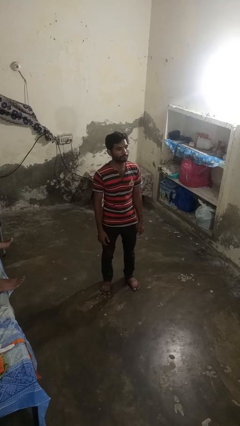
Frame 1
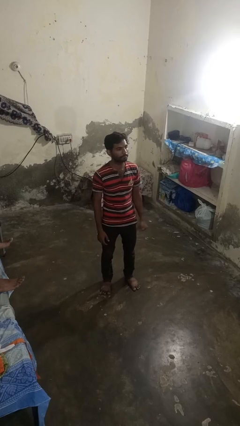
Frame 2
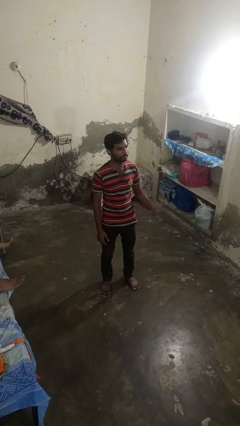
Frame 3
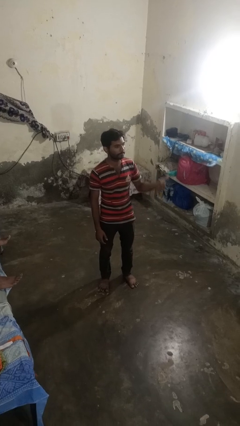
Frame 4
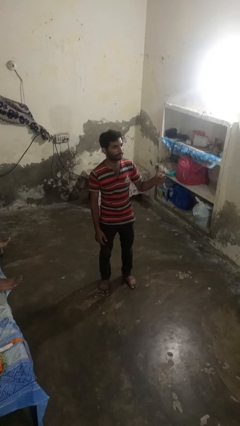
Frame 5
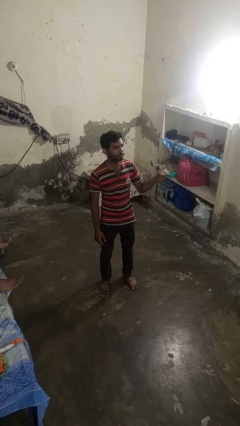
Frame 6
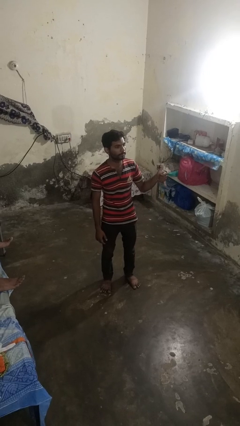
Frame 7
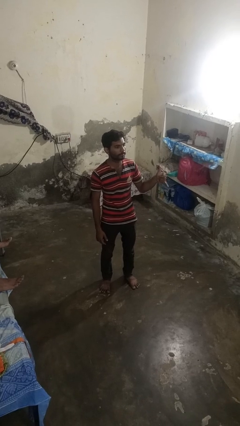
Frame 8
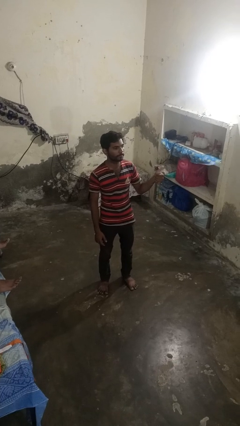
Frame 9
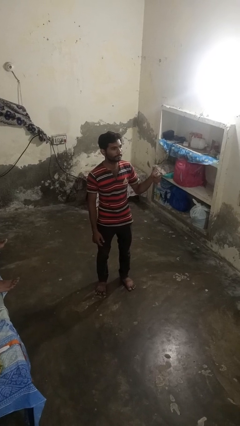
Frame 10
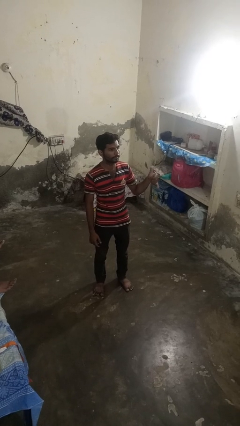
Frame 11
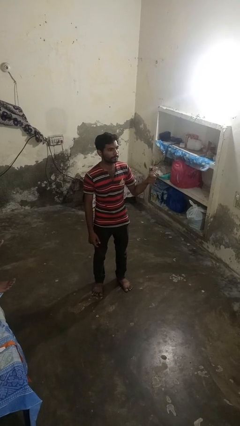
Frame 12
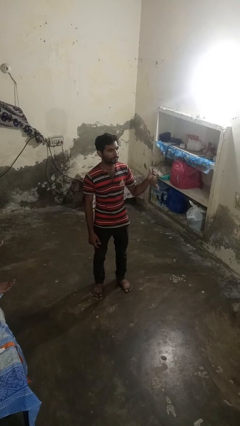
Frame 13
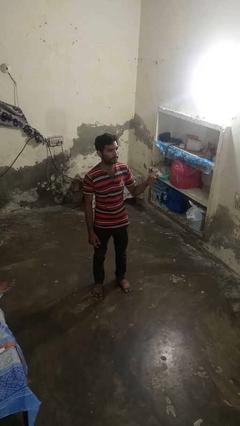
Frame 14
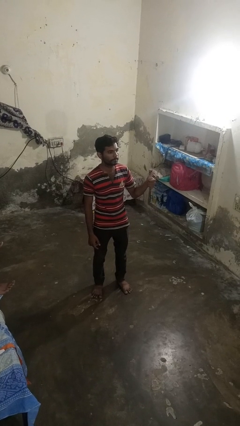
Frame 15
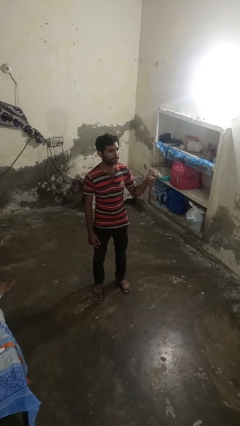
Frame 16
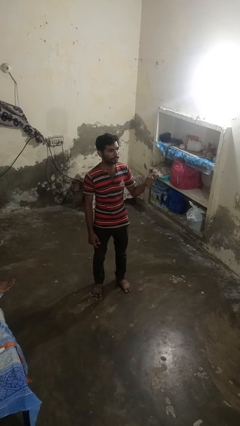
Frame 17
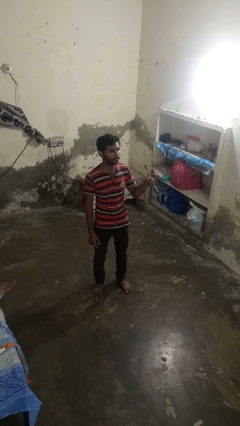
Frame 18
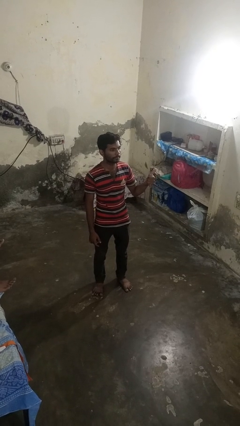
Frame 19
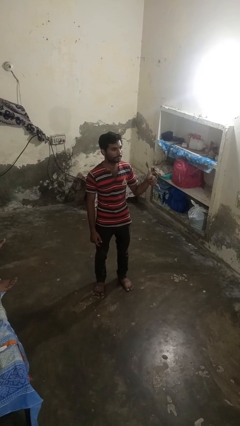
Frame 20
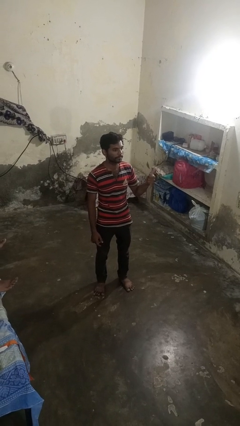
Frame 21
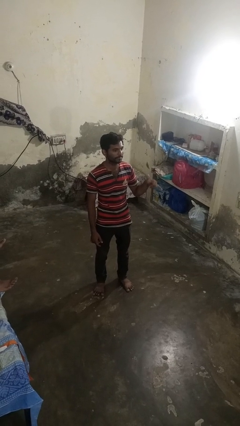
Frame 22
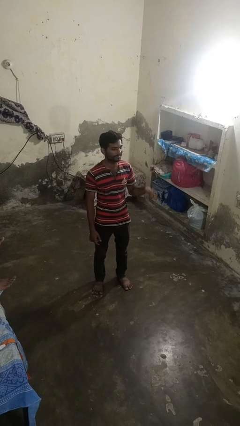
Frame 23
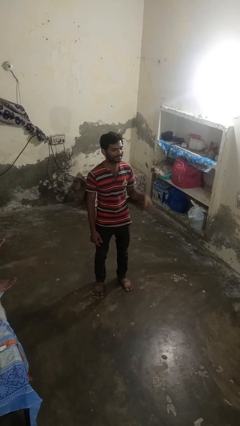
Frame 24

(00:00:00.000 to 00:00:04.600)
person gestures hang loose

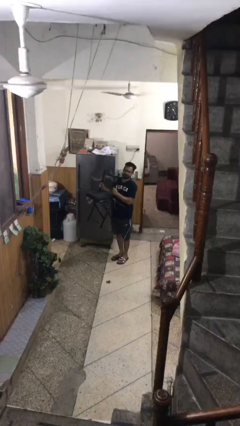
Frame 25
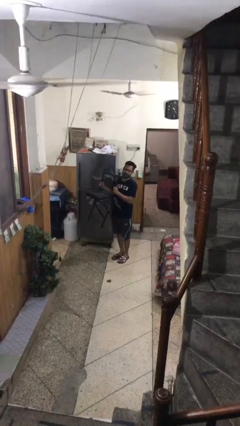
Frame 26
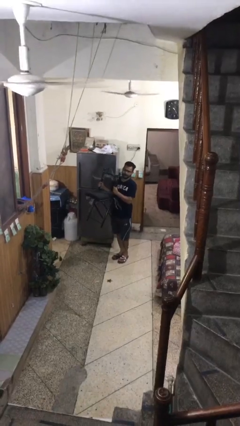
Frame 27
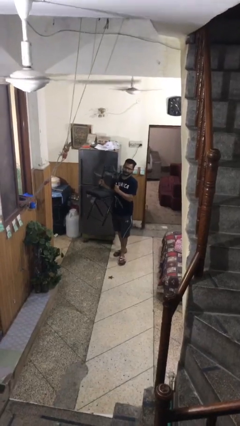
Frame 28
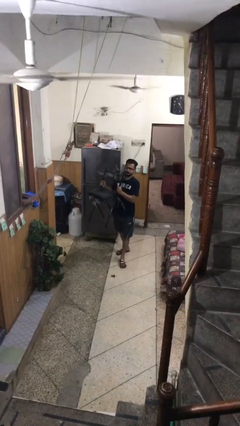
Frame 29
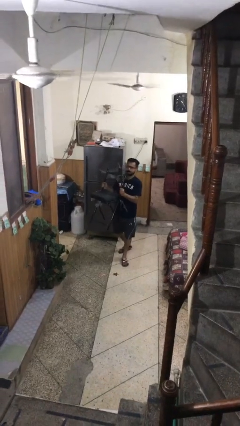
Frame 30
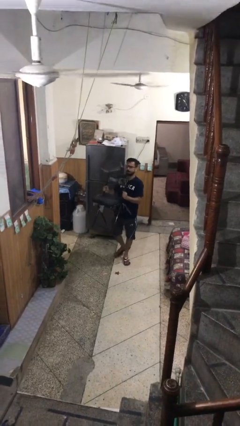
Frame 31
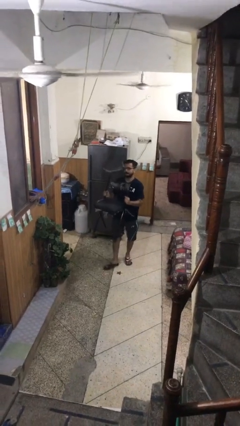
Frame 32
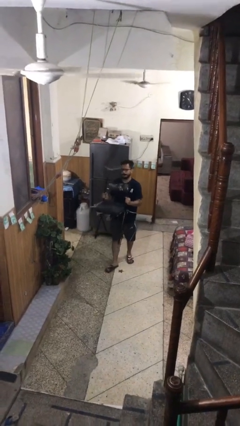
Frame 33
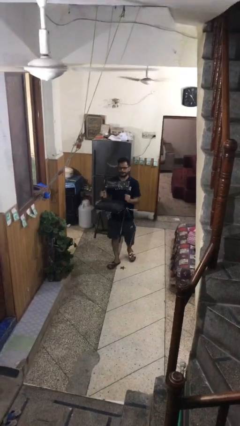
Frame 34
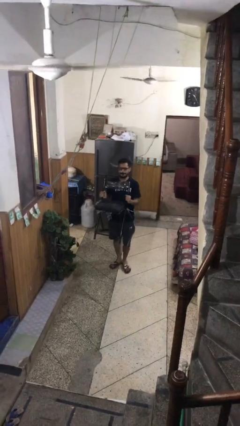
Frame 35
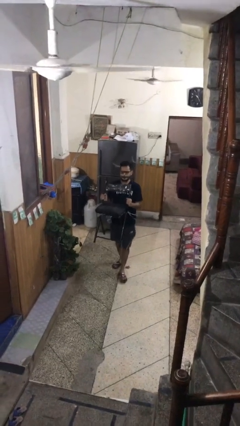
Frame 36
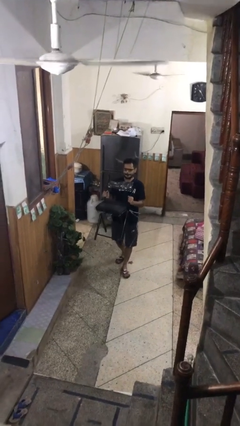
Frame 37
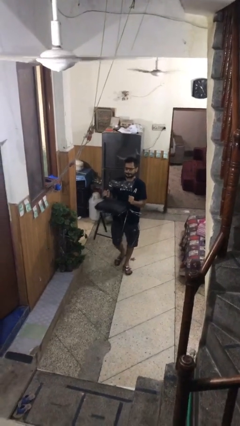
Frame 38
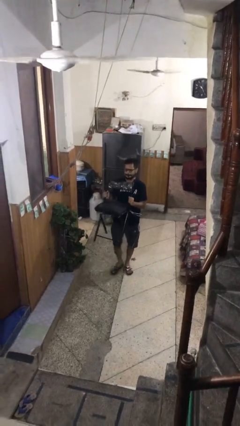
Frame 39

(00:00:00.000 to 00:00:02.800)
person carries heavy object

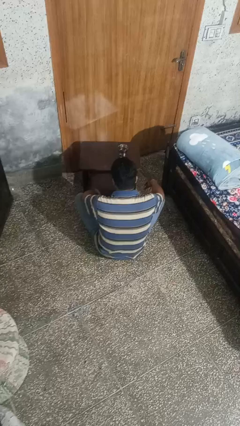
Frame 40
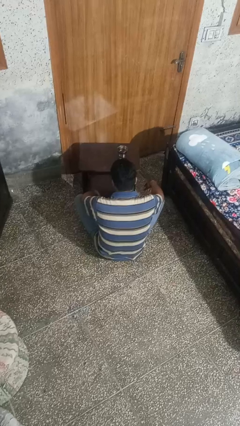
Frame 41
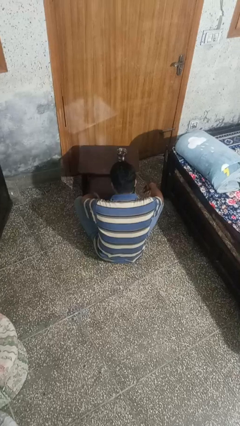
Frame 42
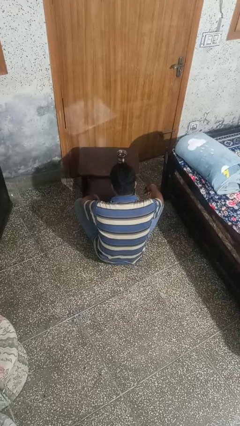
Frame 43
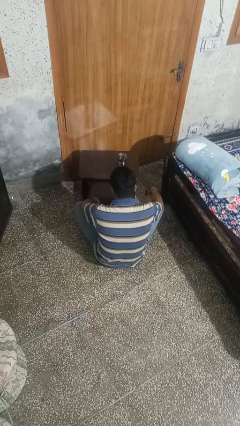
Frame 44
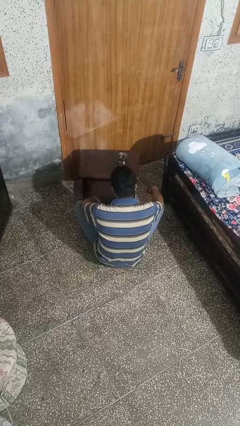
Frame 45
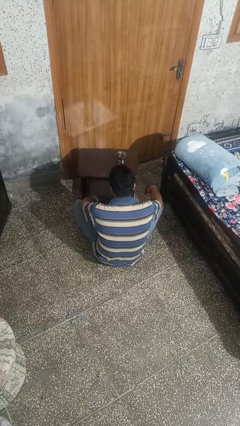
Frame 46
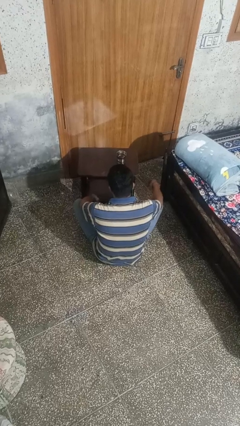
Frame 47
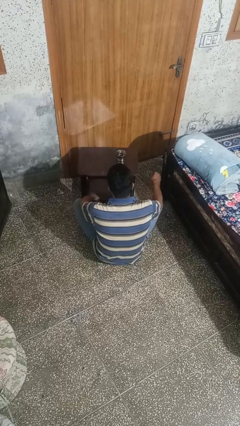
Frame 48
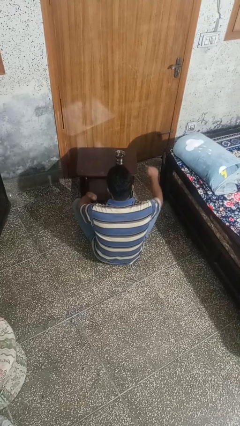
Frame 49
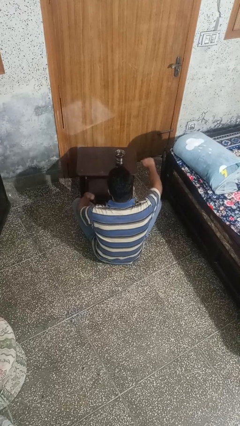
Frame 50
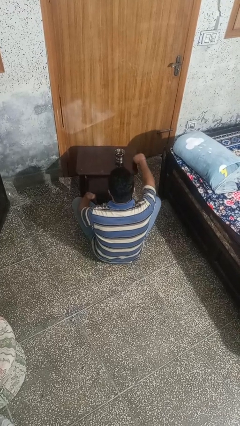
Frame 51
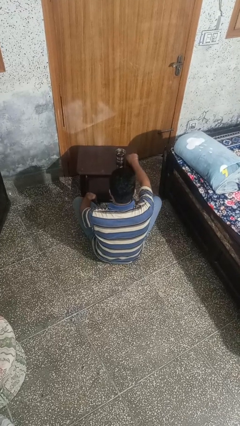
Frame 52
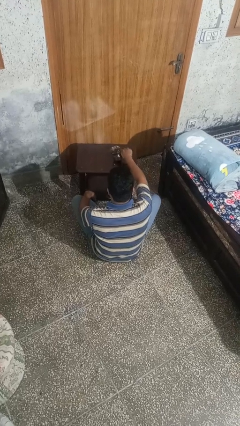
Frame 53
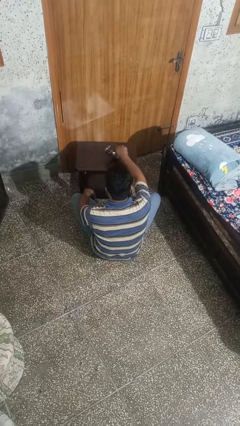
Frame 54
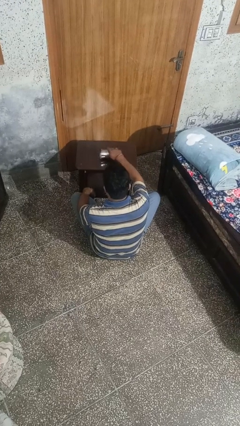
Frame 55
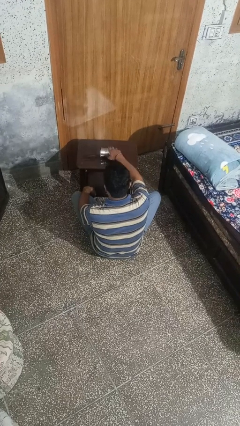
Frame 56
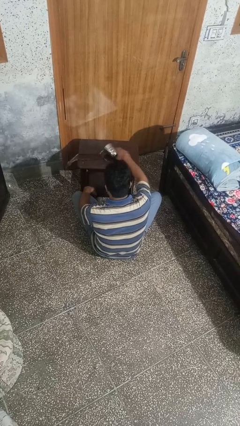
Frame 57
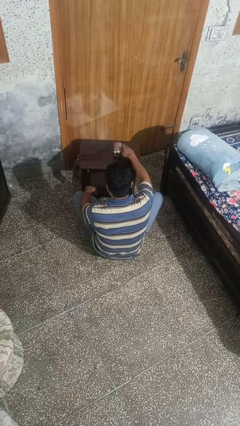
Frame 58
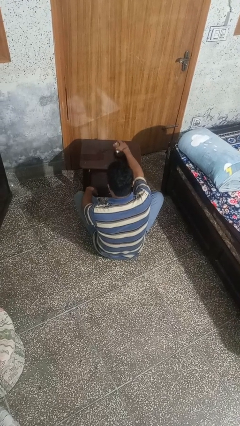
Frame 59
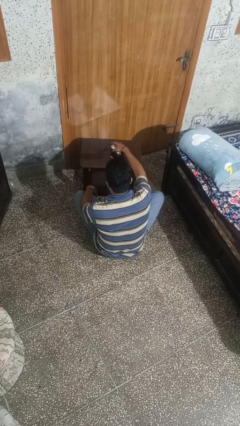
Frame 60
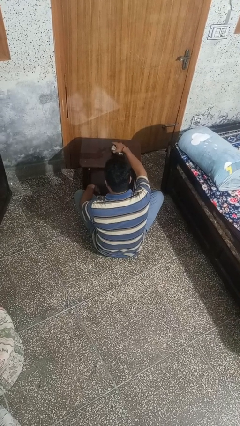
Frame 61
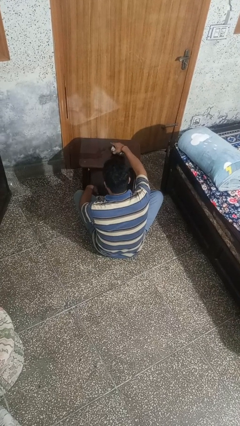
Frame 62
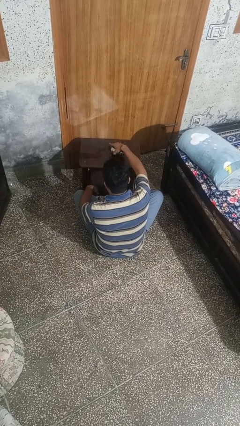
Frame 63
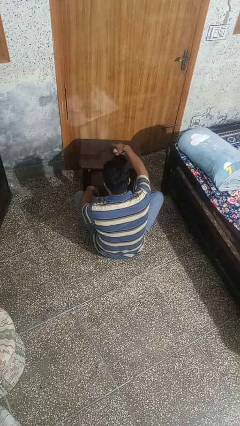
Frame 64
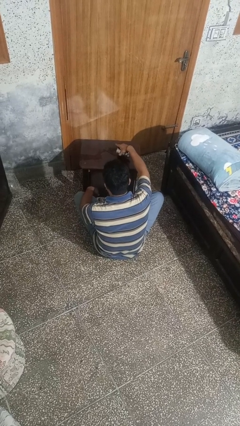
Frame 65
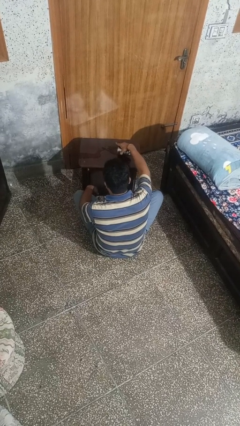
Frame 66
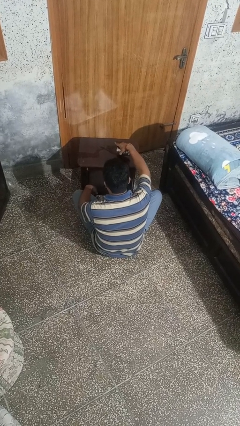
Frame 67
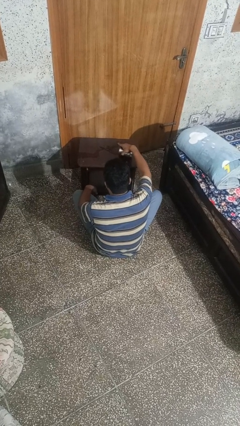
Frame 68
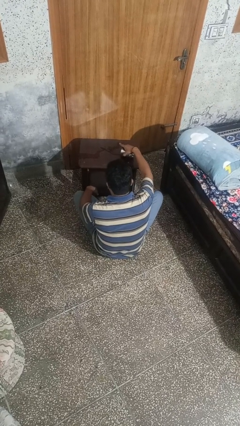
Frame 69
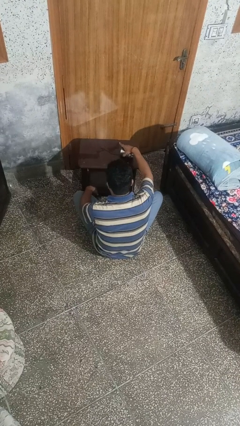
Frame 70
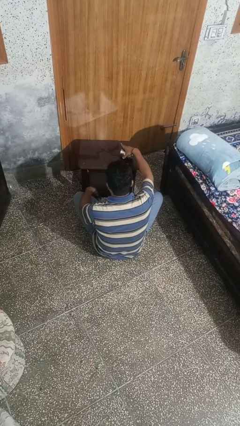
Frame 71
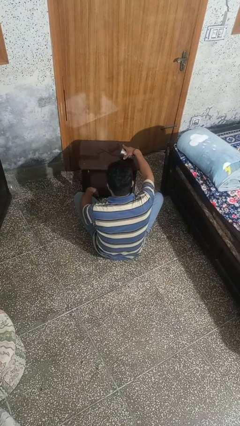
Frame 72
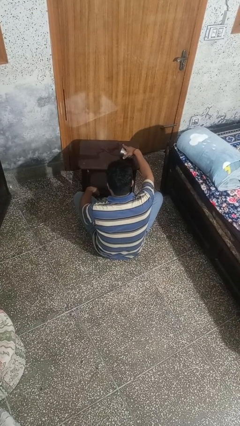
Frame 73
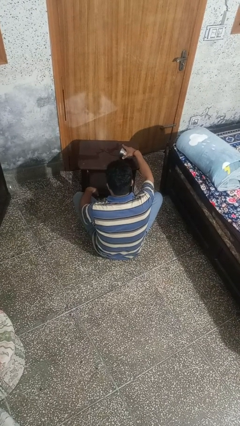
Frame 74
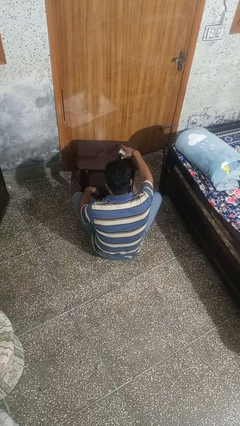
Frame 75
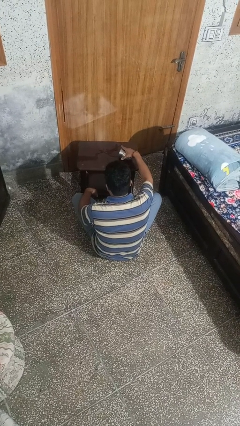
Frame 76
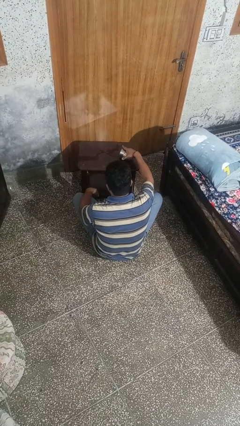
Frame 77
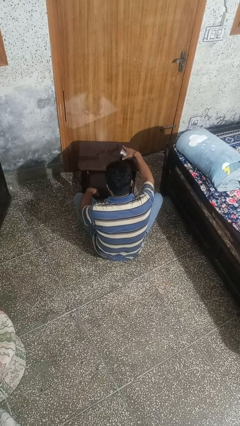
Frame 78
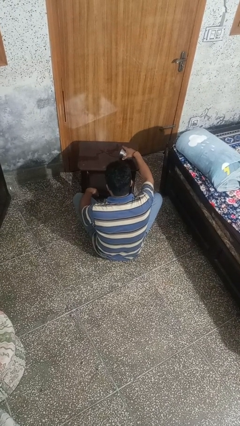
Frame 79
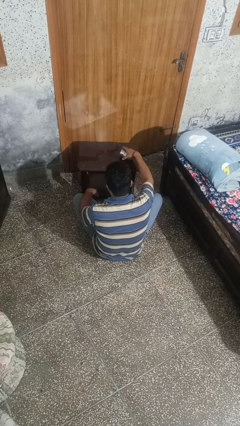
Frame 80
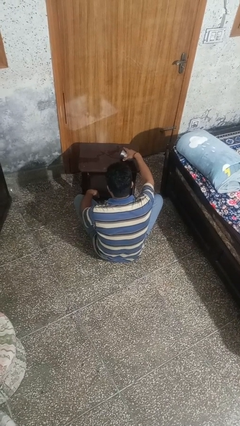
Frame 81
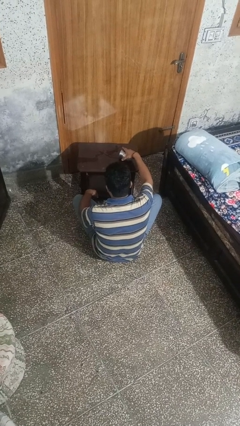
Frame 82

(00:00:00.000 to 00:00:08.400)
person spills on table

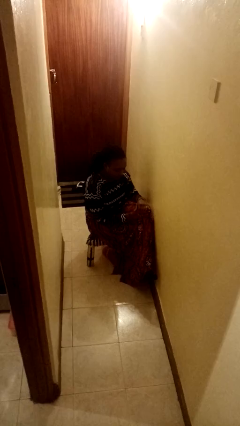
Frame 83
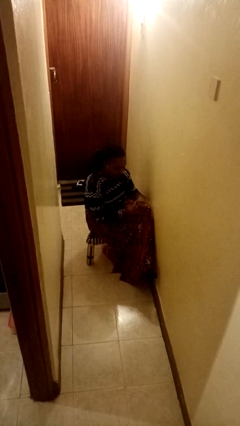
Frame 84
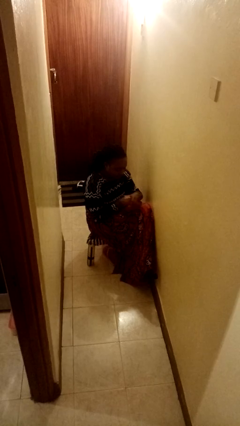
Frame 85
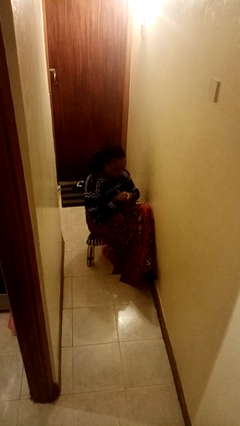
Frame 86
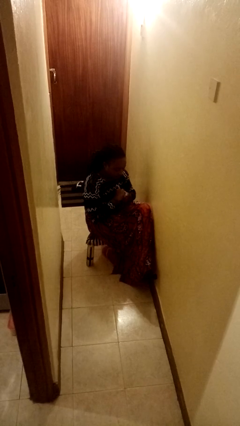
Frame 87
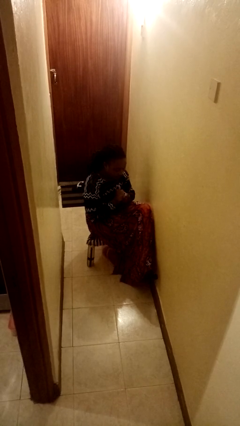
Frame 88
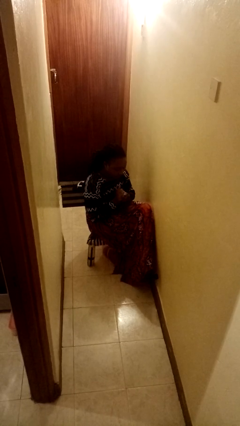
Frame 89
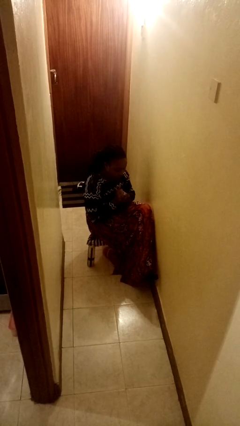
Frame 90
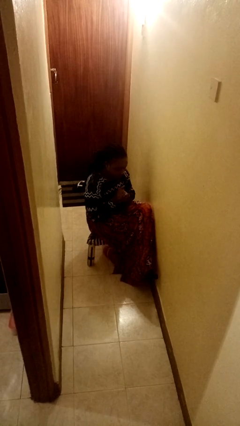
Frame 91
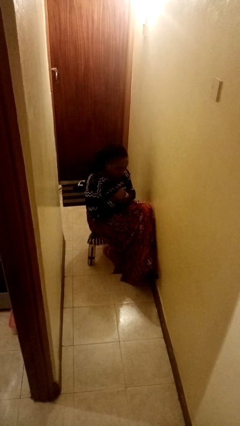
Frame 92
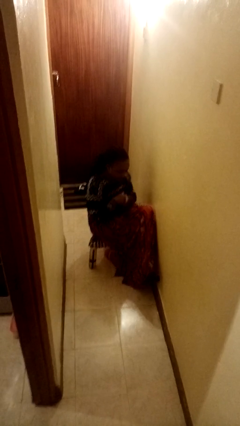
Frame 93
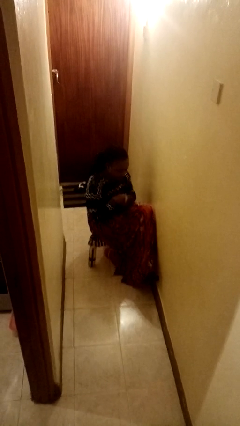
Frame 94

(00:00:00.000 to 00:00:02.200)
person cracks knuckles
